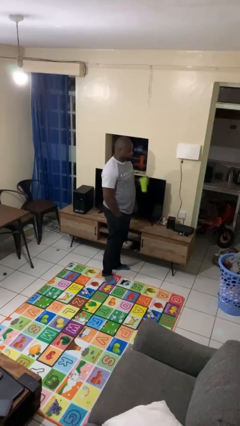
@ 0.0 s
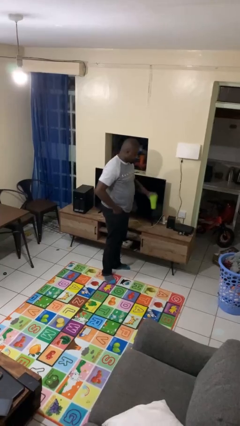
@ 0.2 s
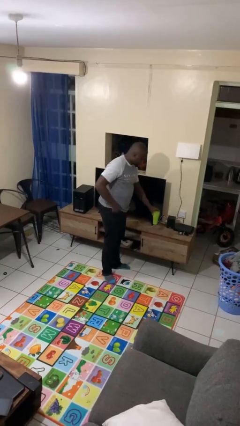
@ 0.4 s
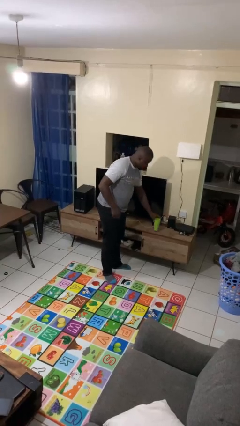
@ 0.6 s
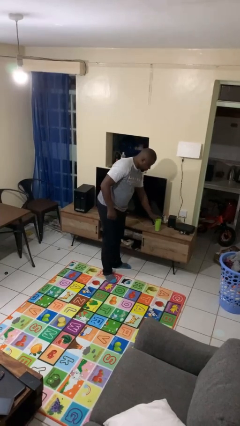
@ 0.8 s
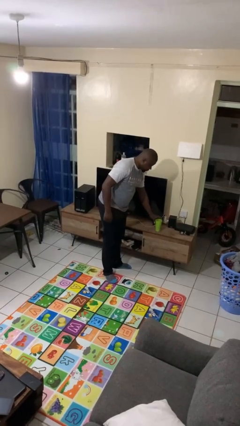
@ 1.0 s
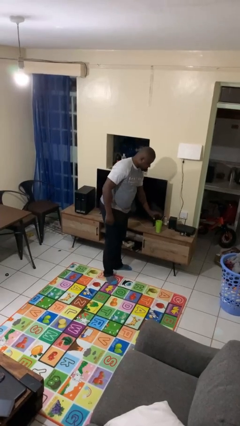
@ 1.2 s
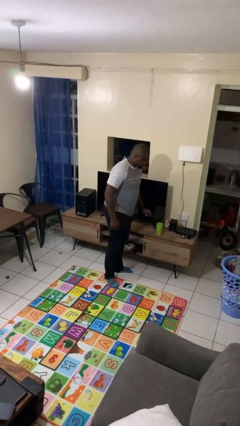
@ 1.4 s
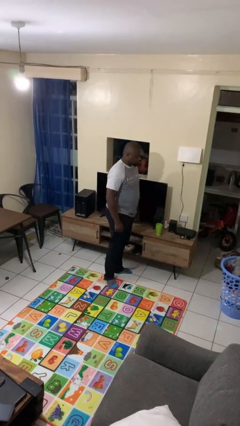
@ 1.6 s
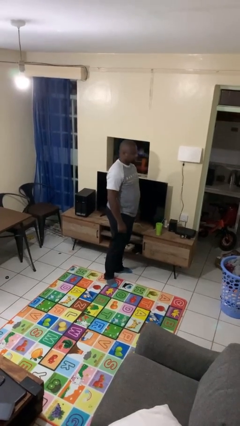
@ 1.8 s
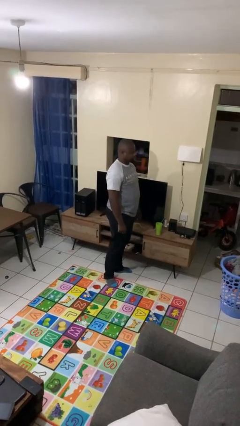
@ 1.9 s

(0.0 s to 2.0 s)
person puts down object on countertop

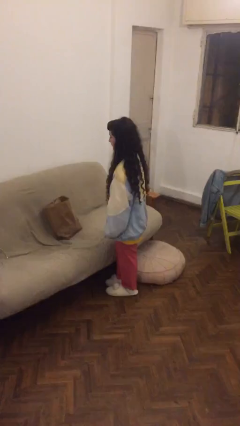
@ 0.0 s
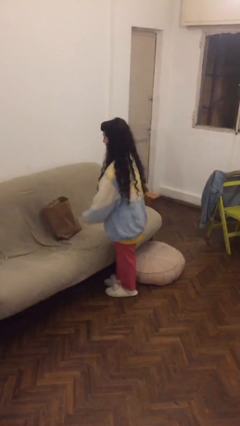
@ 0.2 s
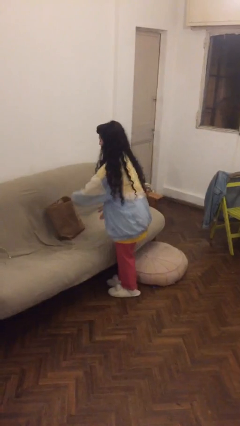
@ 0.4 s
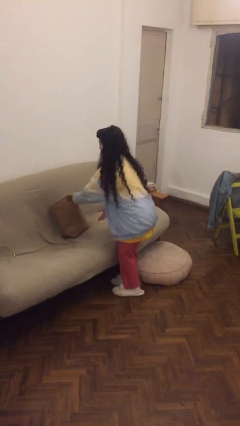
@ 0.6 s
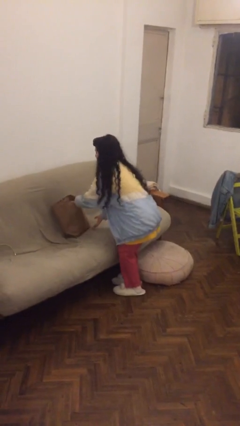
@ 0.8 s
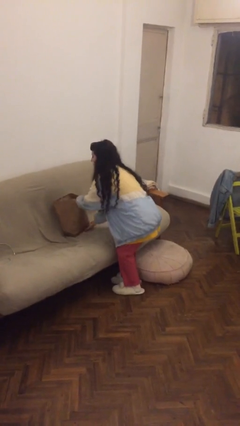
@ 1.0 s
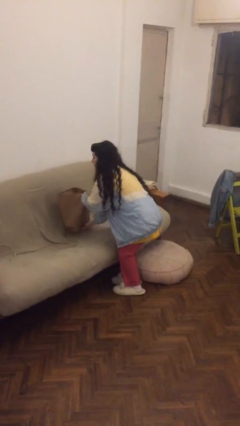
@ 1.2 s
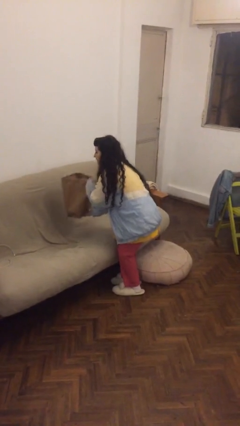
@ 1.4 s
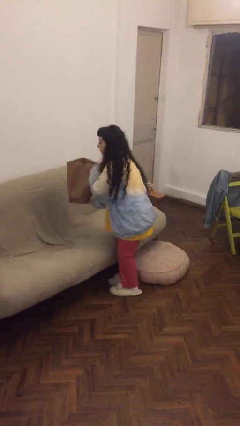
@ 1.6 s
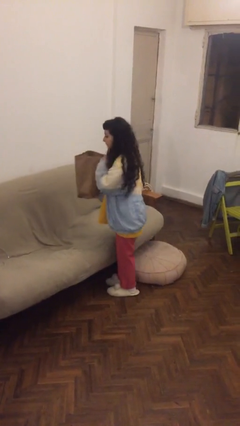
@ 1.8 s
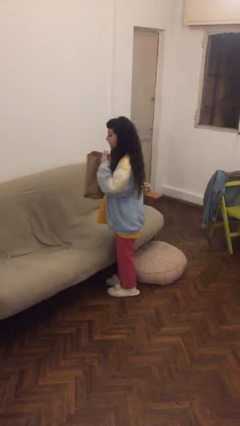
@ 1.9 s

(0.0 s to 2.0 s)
person picks up object from couch

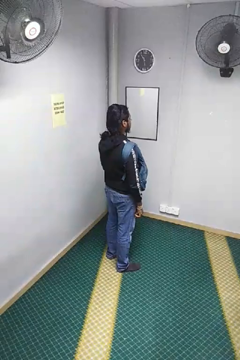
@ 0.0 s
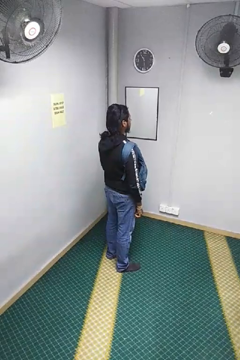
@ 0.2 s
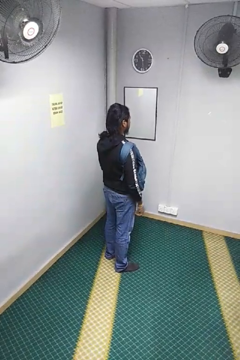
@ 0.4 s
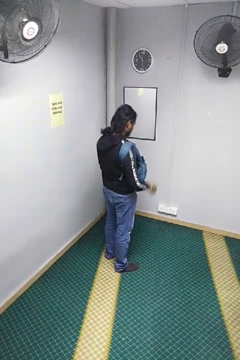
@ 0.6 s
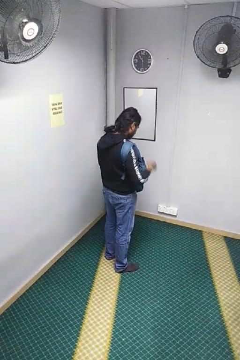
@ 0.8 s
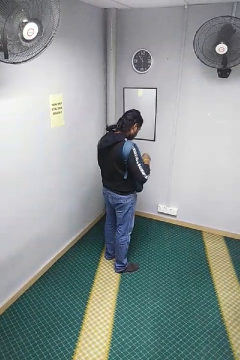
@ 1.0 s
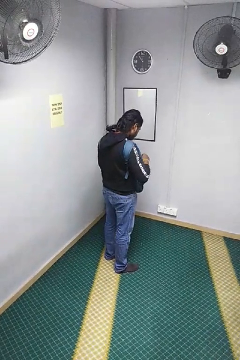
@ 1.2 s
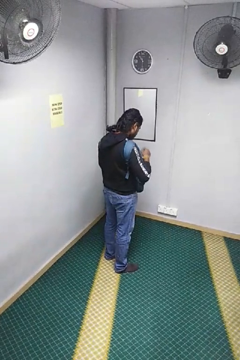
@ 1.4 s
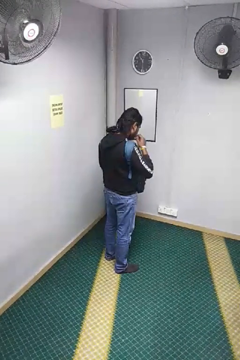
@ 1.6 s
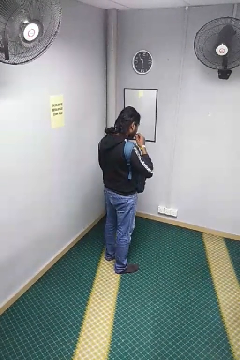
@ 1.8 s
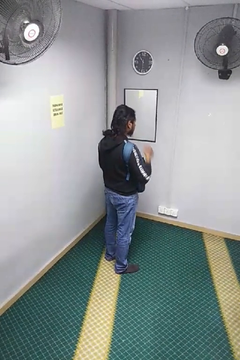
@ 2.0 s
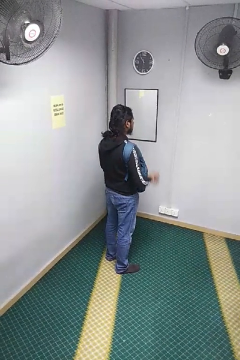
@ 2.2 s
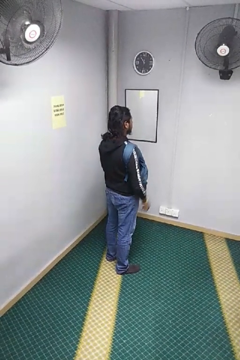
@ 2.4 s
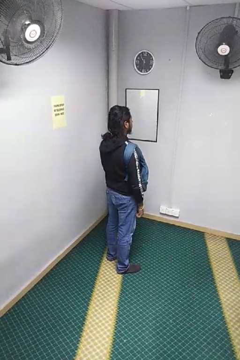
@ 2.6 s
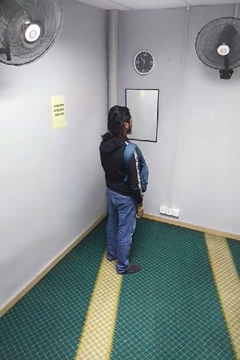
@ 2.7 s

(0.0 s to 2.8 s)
person eats snack from bag

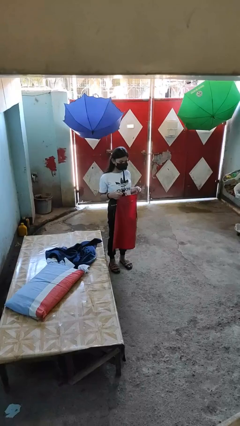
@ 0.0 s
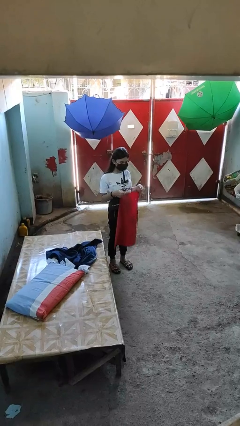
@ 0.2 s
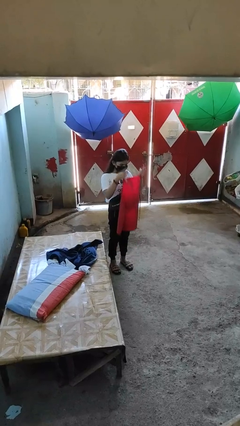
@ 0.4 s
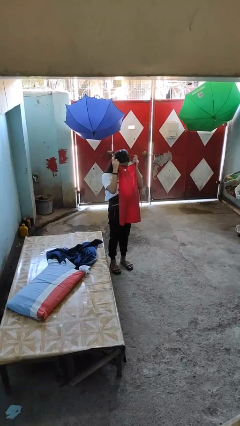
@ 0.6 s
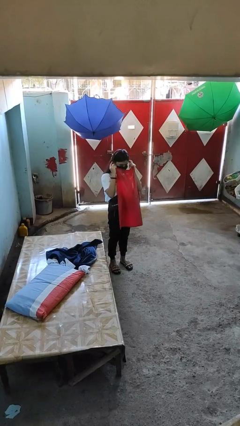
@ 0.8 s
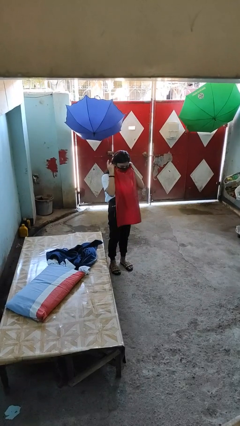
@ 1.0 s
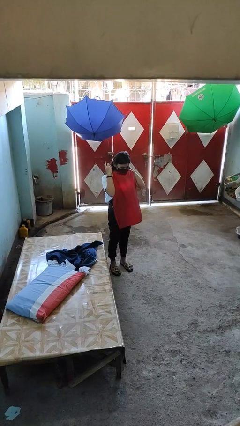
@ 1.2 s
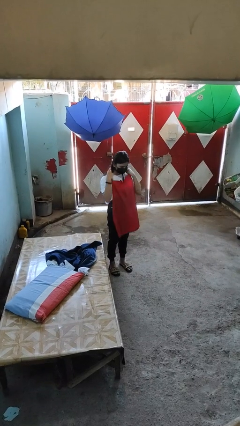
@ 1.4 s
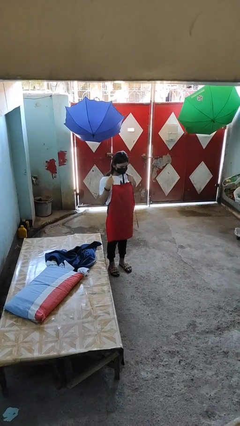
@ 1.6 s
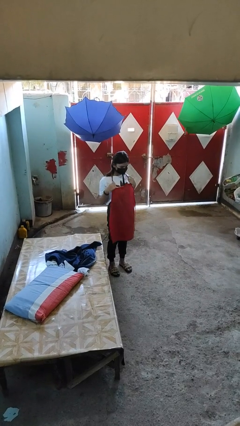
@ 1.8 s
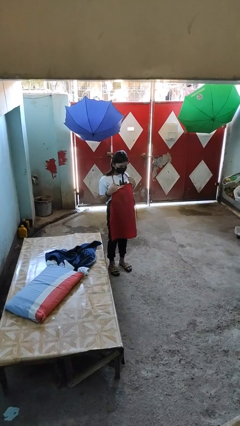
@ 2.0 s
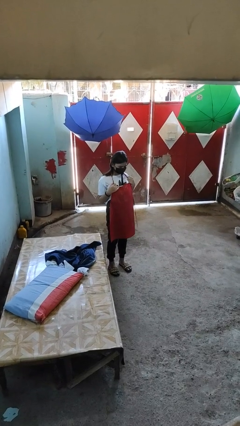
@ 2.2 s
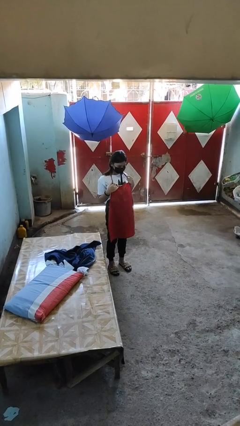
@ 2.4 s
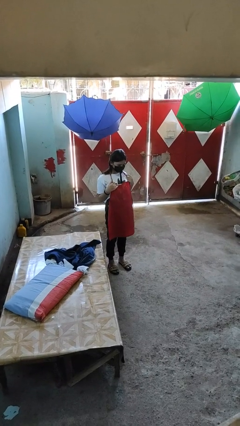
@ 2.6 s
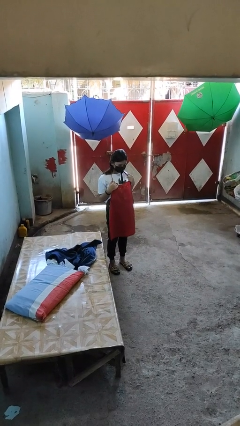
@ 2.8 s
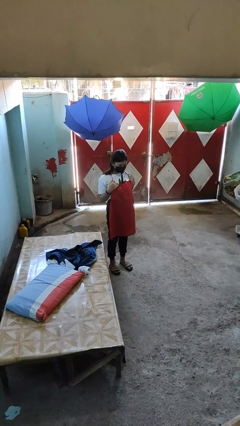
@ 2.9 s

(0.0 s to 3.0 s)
person puts on apron

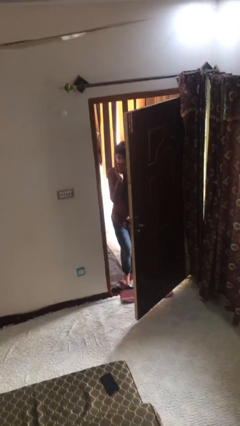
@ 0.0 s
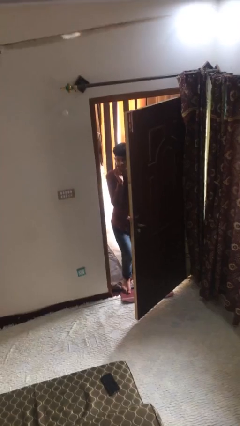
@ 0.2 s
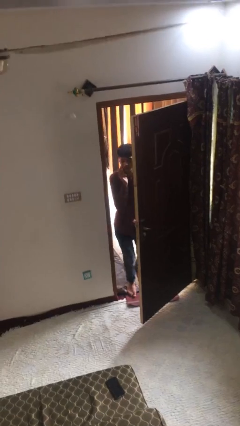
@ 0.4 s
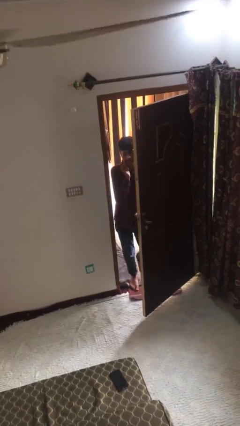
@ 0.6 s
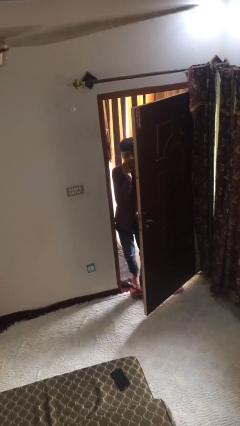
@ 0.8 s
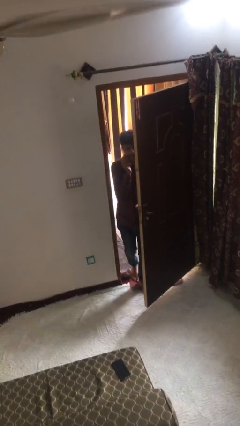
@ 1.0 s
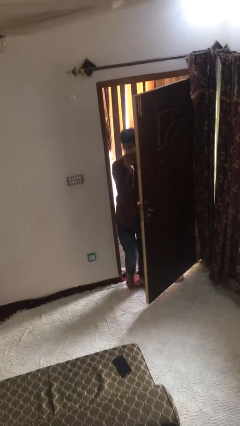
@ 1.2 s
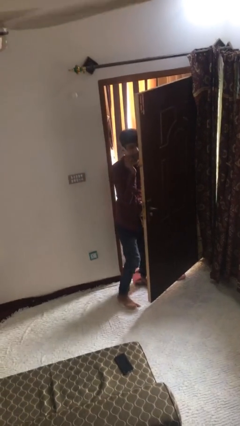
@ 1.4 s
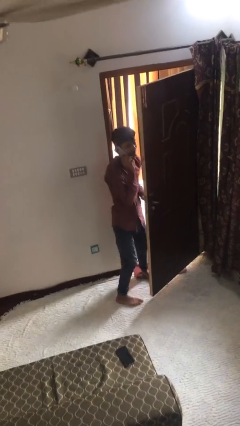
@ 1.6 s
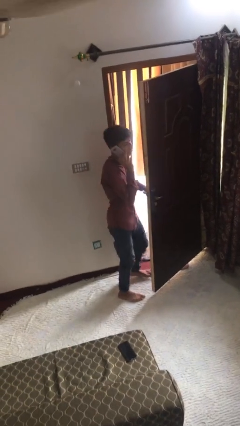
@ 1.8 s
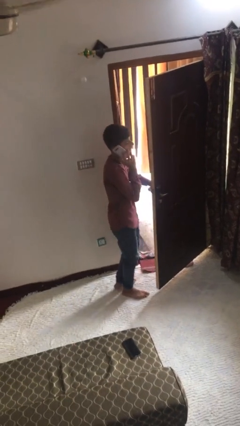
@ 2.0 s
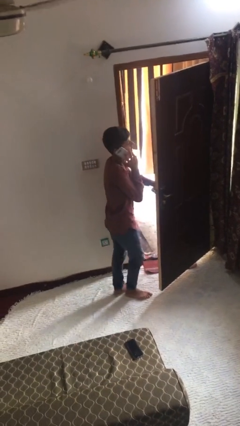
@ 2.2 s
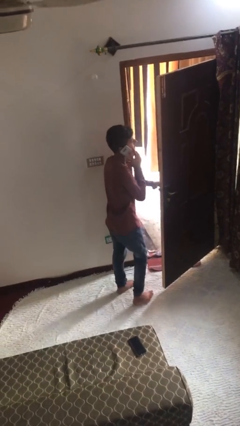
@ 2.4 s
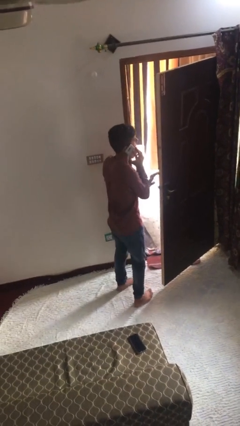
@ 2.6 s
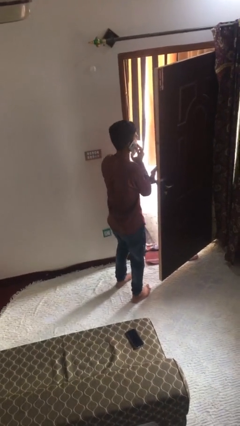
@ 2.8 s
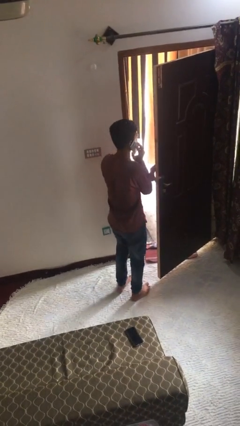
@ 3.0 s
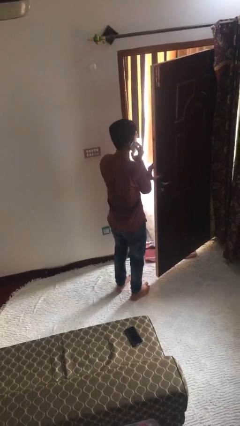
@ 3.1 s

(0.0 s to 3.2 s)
person enters scene through structure

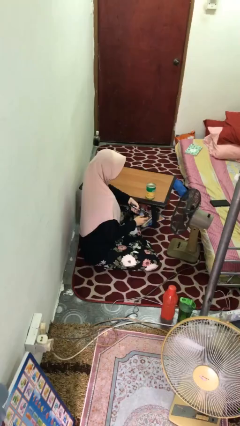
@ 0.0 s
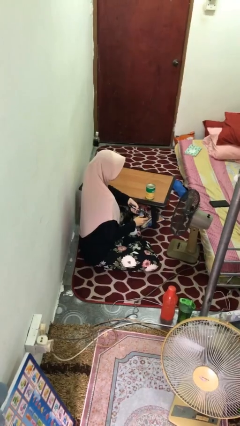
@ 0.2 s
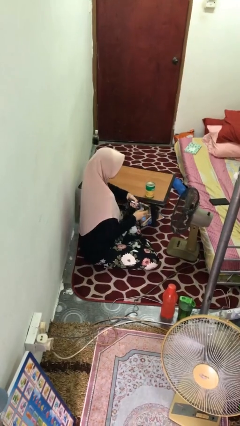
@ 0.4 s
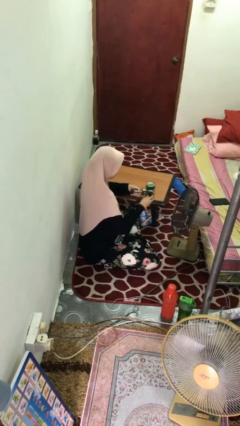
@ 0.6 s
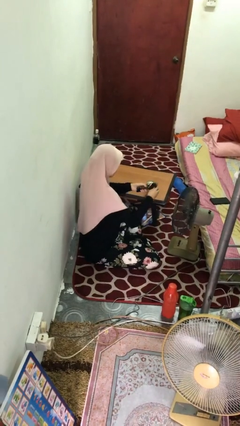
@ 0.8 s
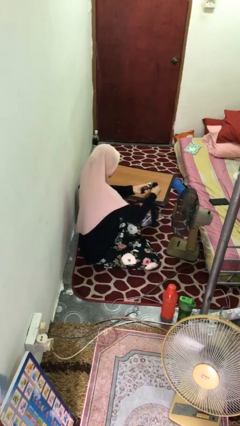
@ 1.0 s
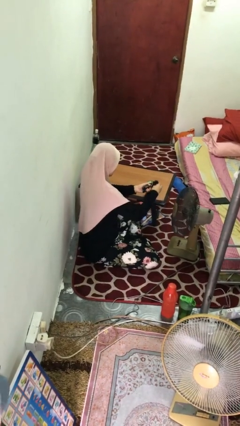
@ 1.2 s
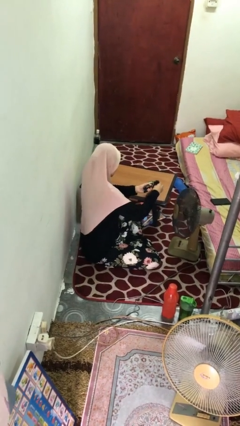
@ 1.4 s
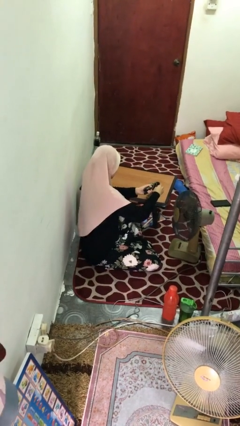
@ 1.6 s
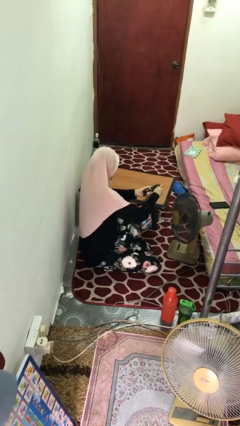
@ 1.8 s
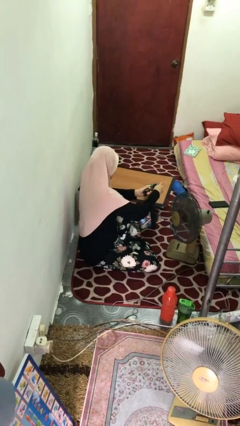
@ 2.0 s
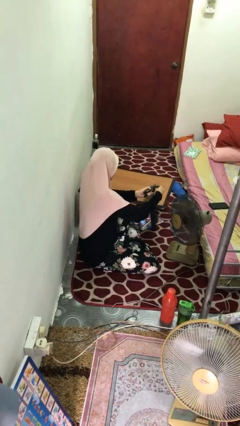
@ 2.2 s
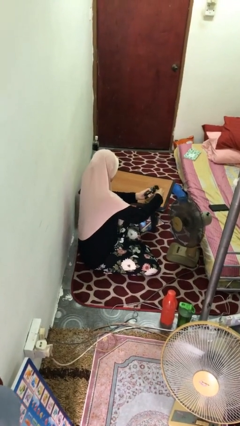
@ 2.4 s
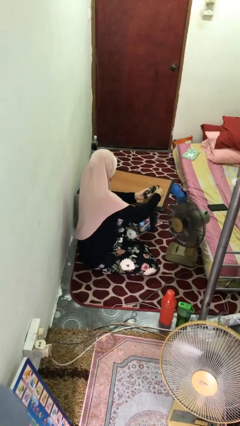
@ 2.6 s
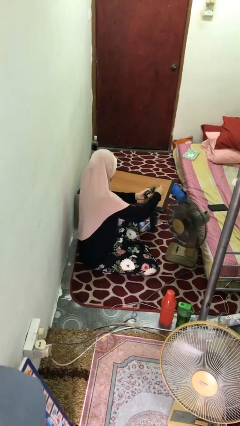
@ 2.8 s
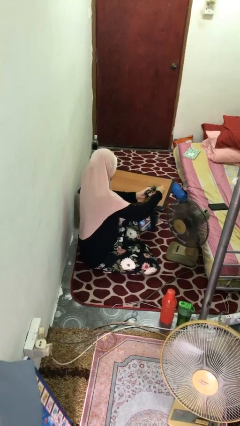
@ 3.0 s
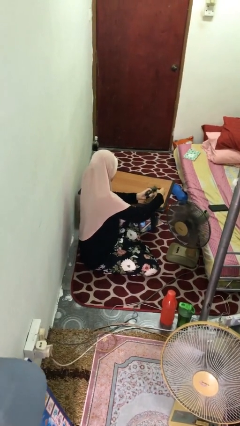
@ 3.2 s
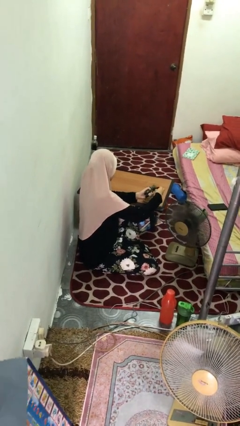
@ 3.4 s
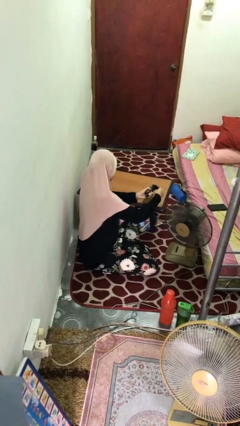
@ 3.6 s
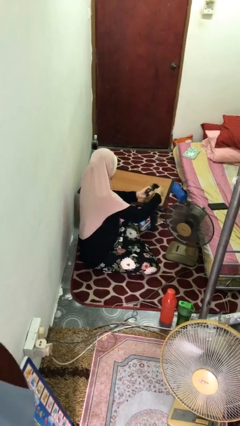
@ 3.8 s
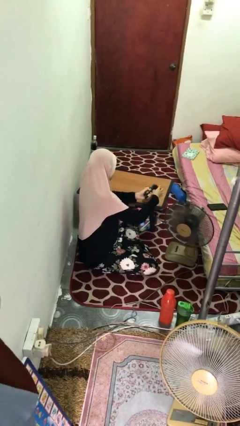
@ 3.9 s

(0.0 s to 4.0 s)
person opens can with can opener

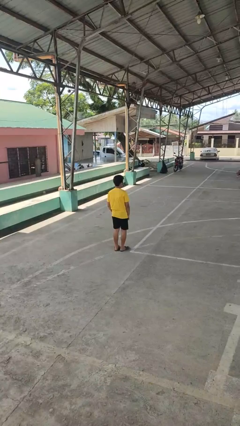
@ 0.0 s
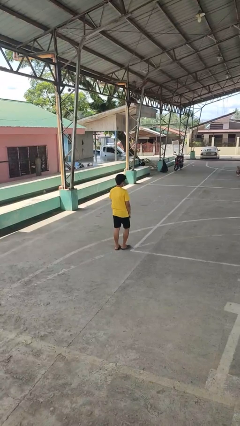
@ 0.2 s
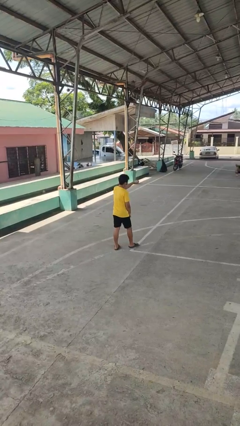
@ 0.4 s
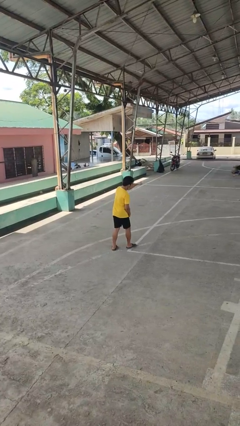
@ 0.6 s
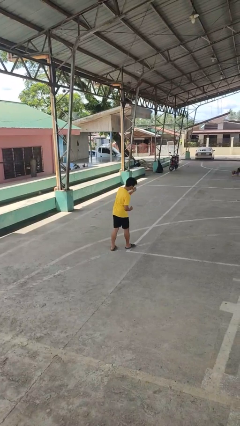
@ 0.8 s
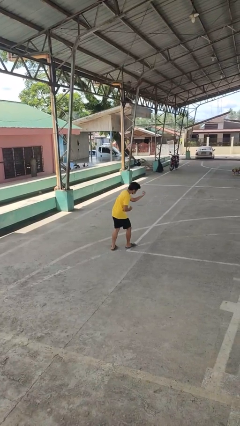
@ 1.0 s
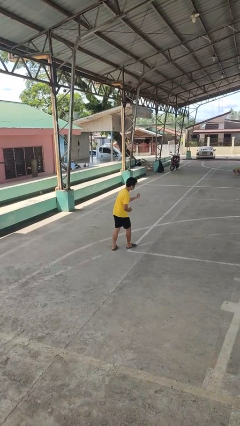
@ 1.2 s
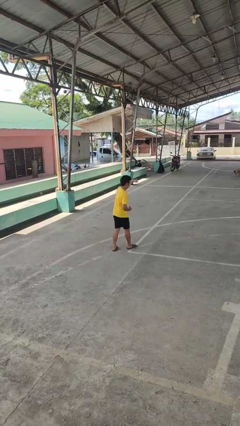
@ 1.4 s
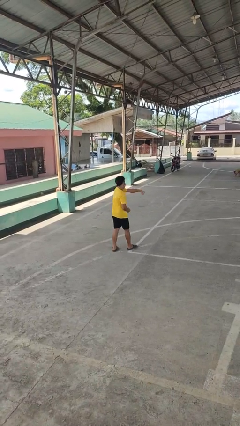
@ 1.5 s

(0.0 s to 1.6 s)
person punches
